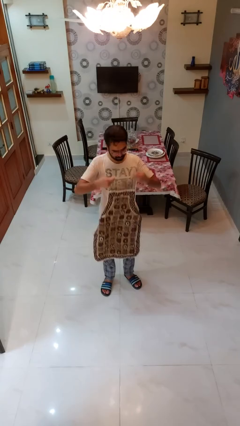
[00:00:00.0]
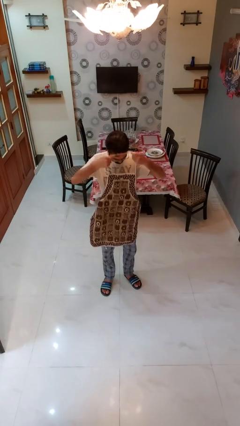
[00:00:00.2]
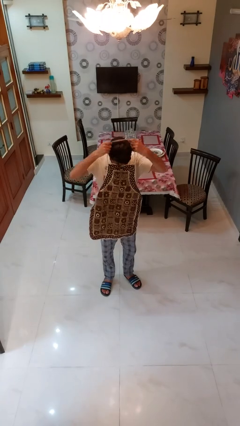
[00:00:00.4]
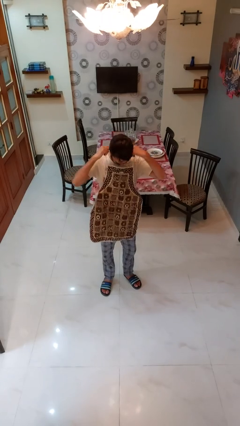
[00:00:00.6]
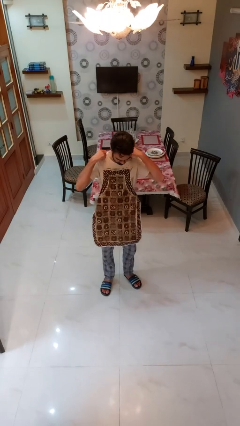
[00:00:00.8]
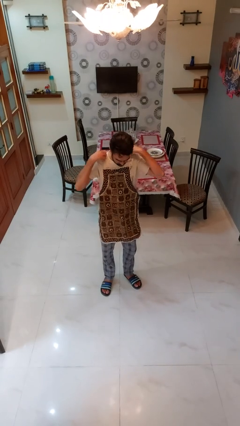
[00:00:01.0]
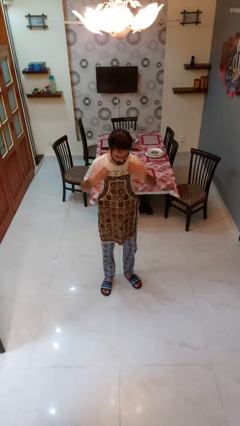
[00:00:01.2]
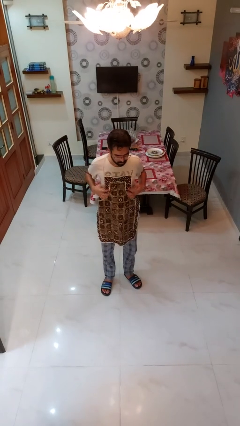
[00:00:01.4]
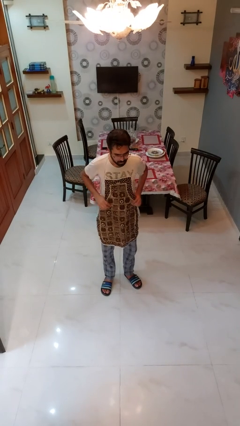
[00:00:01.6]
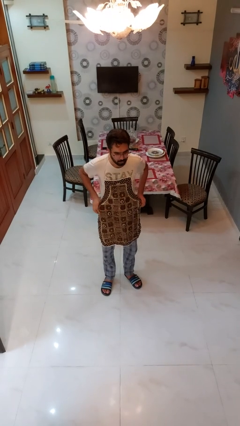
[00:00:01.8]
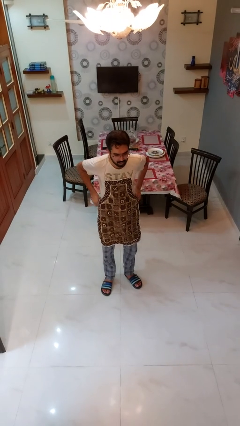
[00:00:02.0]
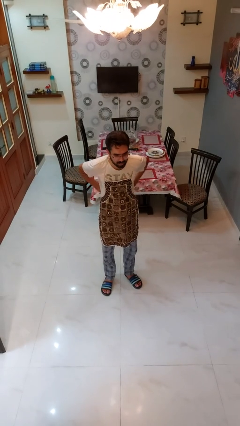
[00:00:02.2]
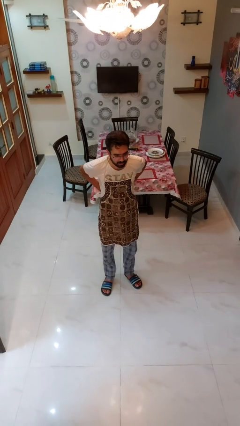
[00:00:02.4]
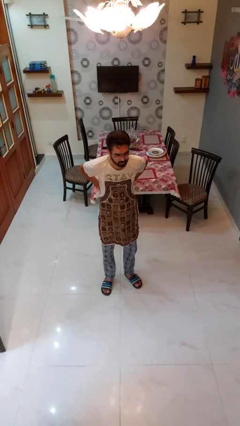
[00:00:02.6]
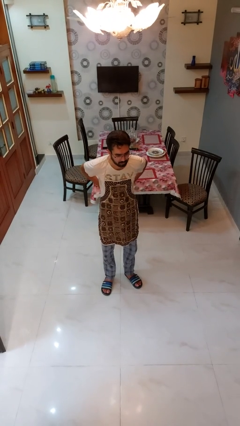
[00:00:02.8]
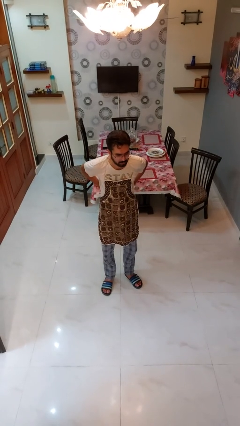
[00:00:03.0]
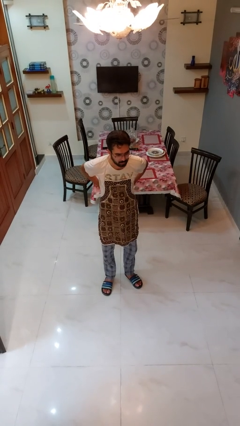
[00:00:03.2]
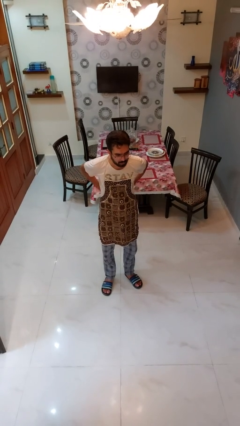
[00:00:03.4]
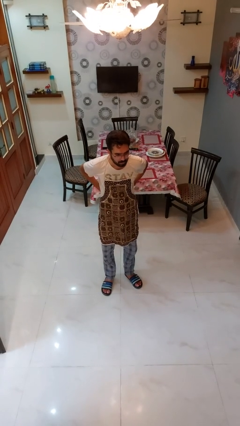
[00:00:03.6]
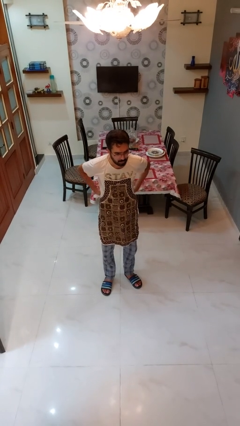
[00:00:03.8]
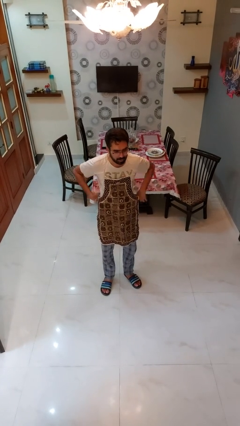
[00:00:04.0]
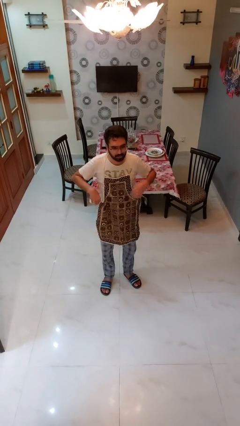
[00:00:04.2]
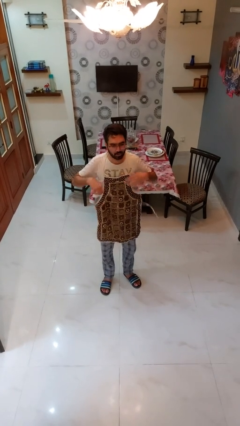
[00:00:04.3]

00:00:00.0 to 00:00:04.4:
person puts on apron

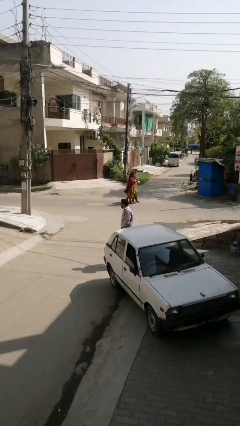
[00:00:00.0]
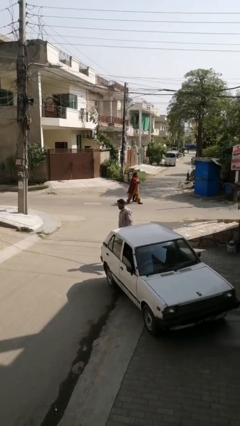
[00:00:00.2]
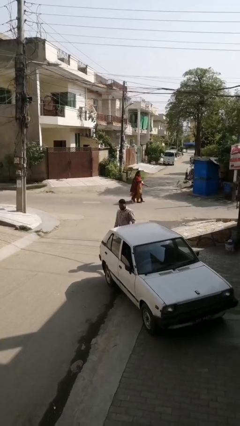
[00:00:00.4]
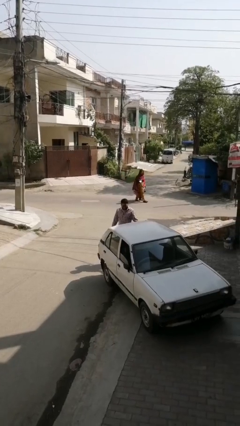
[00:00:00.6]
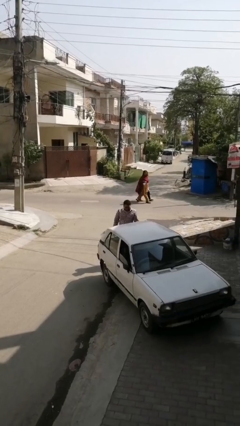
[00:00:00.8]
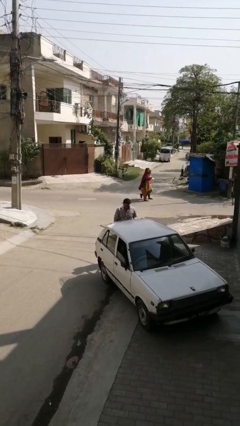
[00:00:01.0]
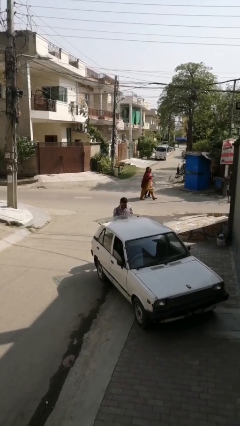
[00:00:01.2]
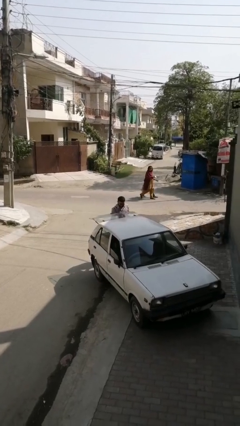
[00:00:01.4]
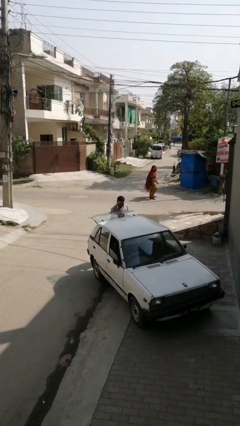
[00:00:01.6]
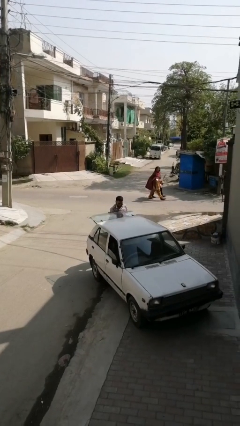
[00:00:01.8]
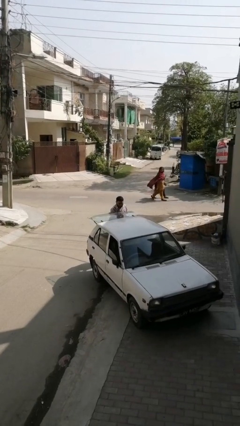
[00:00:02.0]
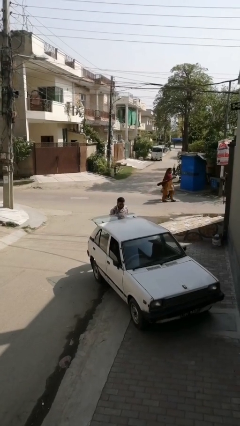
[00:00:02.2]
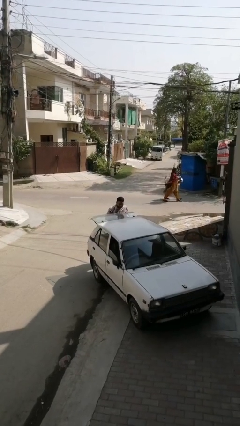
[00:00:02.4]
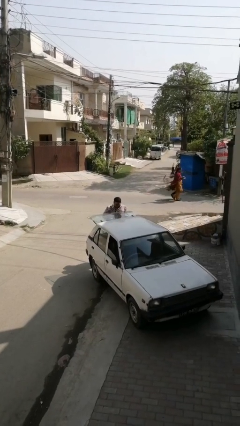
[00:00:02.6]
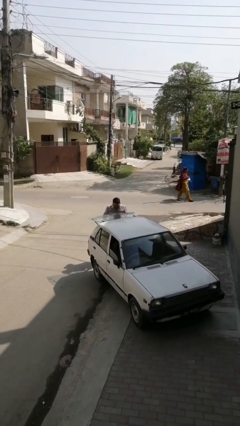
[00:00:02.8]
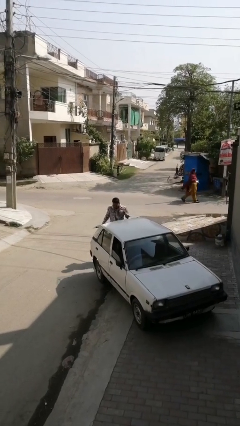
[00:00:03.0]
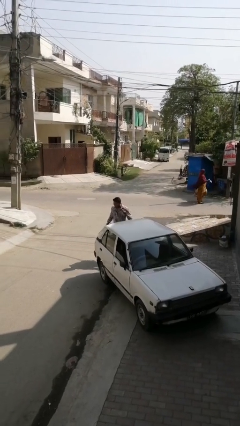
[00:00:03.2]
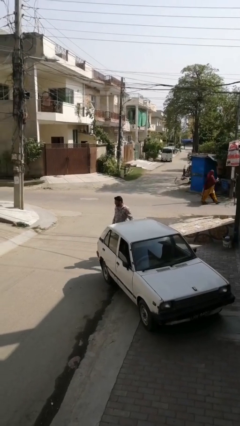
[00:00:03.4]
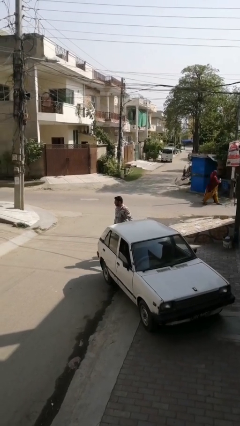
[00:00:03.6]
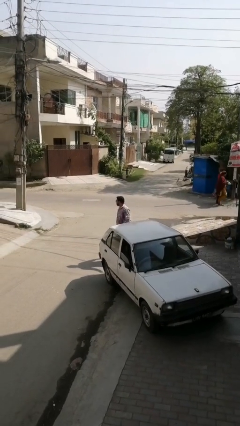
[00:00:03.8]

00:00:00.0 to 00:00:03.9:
person unloads car

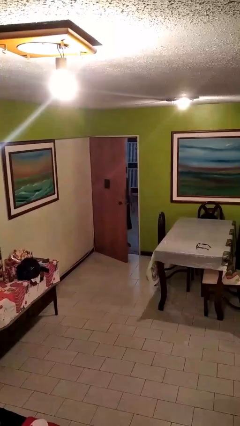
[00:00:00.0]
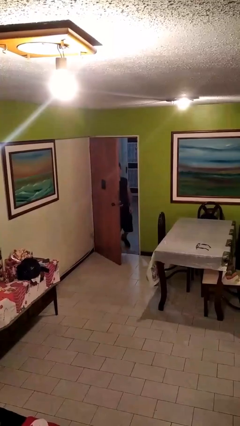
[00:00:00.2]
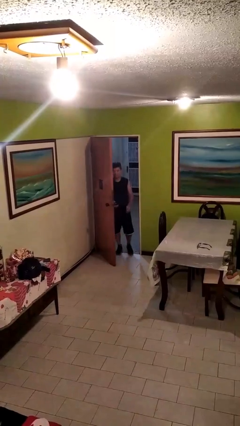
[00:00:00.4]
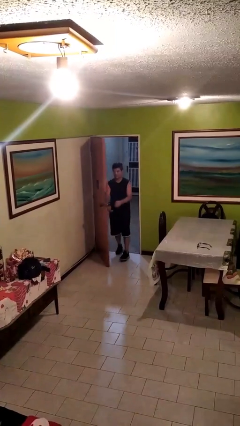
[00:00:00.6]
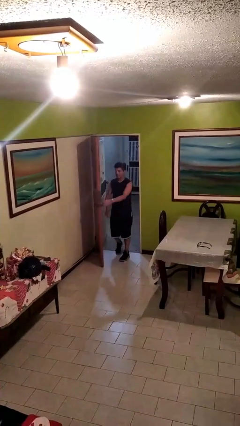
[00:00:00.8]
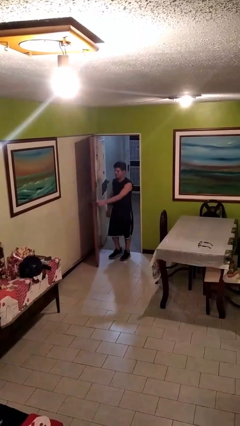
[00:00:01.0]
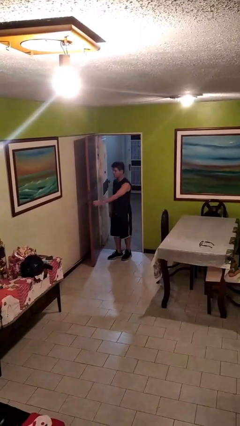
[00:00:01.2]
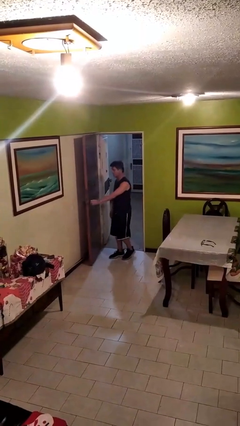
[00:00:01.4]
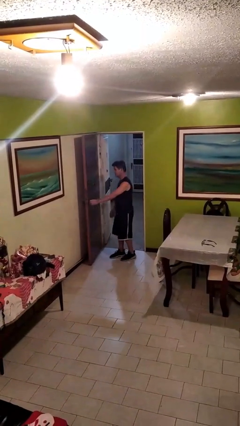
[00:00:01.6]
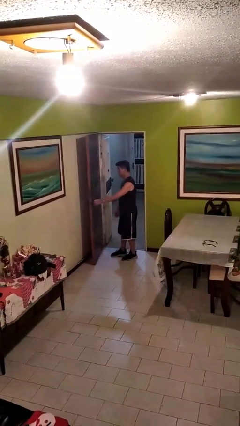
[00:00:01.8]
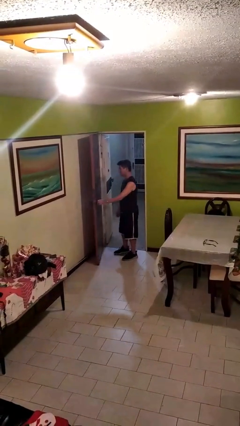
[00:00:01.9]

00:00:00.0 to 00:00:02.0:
person opens facility door

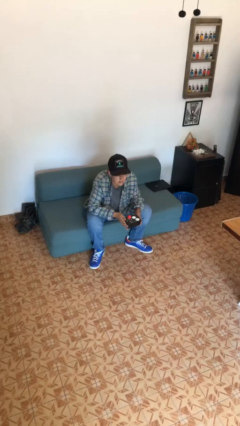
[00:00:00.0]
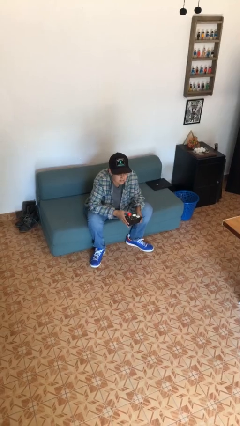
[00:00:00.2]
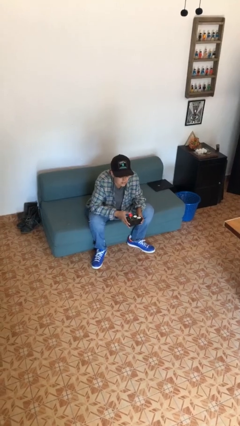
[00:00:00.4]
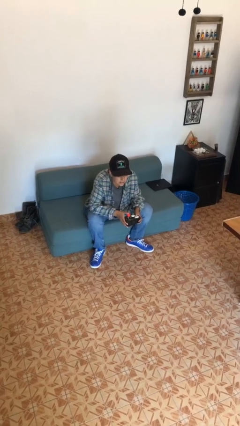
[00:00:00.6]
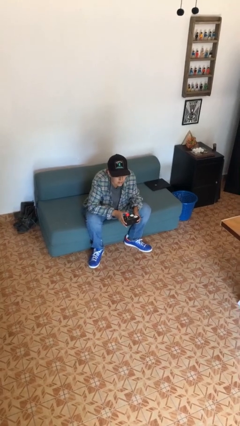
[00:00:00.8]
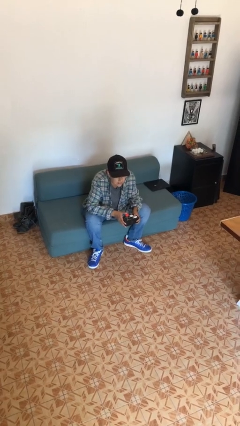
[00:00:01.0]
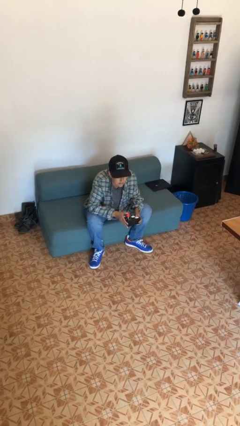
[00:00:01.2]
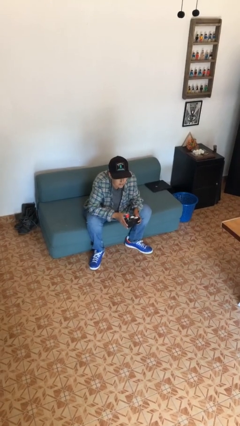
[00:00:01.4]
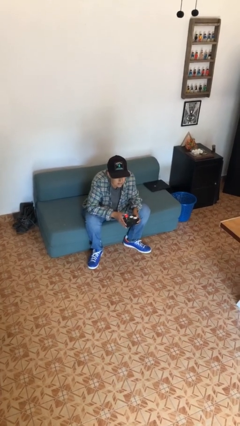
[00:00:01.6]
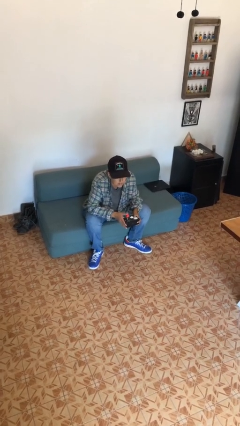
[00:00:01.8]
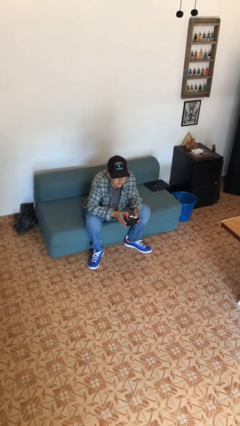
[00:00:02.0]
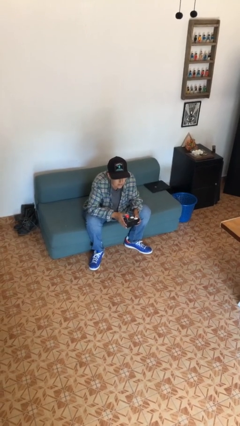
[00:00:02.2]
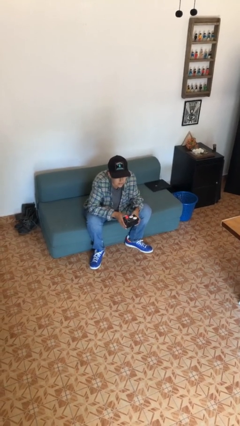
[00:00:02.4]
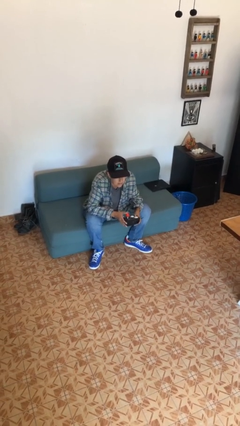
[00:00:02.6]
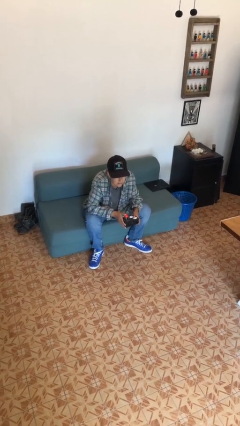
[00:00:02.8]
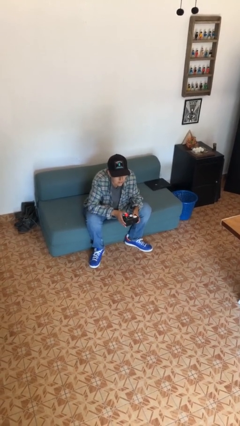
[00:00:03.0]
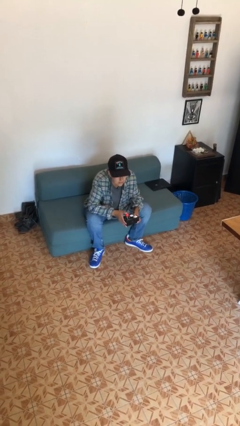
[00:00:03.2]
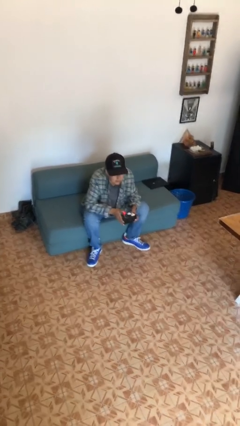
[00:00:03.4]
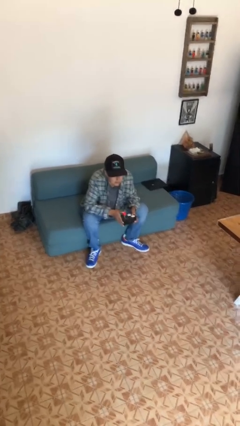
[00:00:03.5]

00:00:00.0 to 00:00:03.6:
person interacts with handheld game

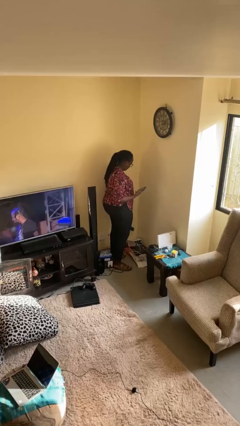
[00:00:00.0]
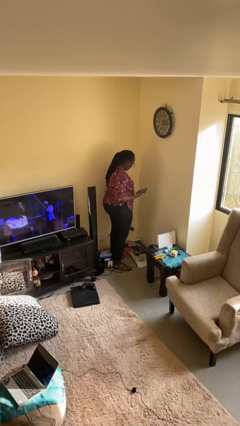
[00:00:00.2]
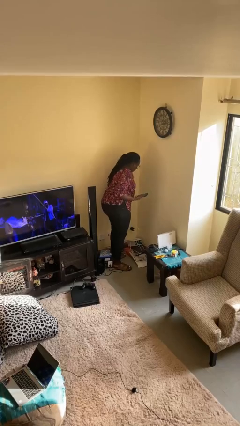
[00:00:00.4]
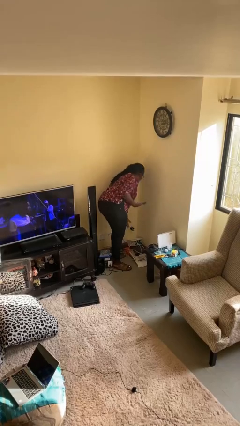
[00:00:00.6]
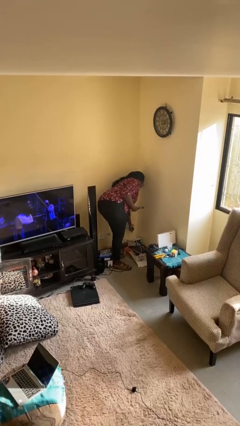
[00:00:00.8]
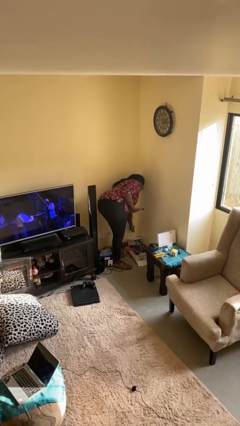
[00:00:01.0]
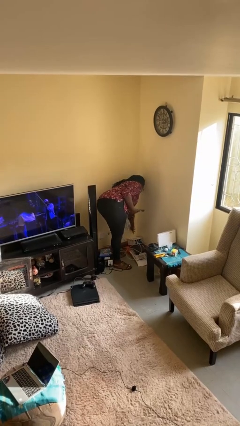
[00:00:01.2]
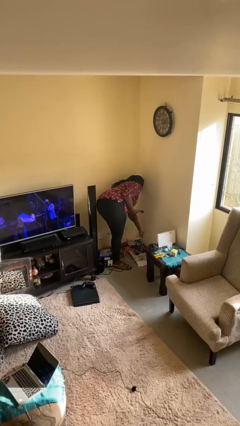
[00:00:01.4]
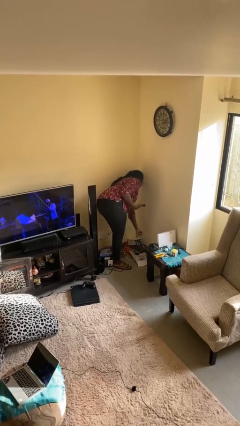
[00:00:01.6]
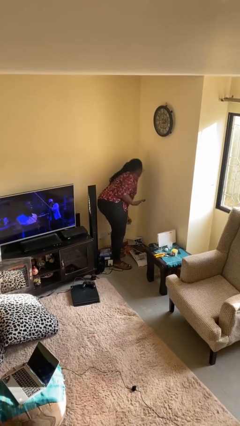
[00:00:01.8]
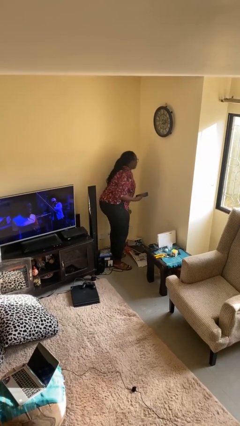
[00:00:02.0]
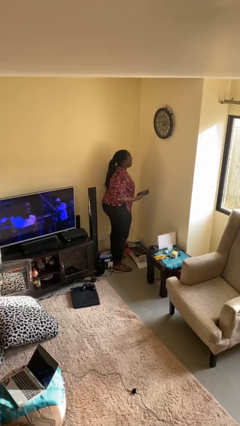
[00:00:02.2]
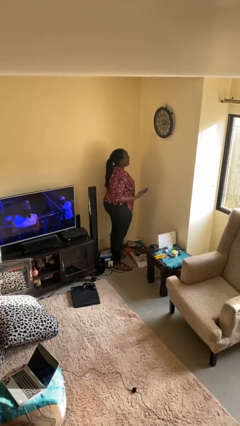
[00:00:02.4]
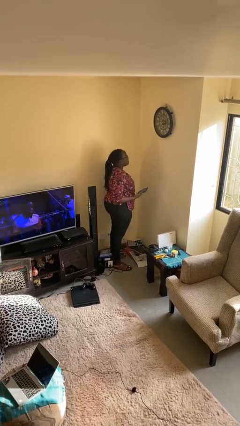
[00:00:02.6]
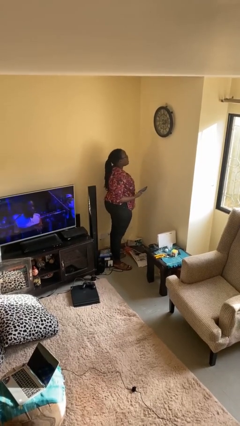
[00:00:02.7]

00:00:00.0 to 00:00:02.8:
person unplugs from electrical socket

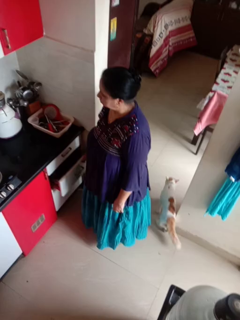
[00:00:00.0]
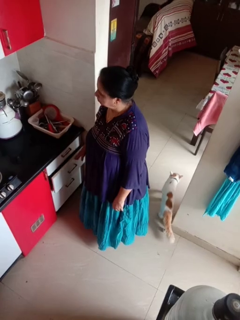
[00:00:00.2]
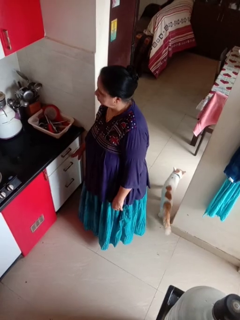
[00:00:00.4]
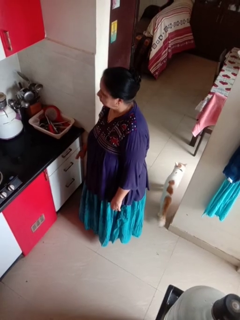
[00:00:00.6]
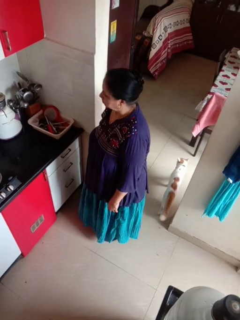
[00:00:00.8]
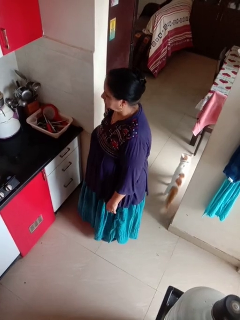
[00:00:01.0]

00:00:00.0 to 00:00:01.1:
person closes kitchen drawer
